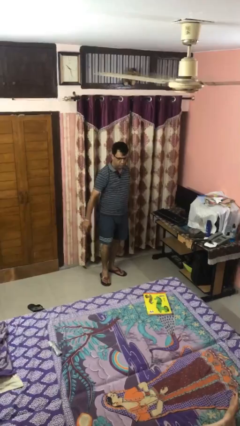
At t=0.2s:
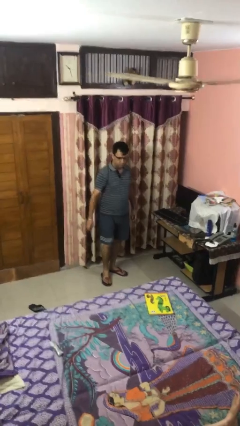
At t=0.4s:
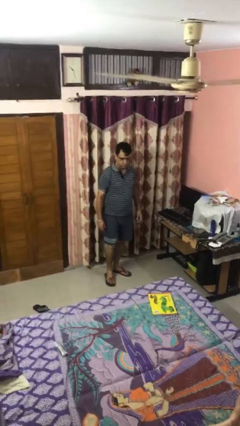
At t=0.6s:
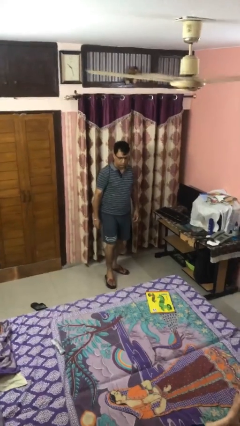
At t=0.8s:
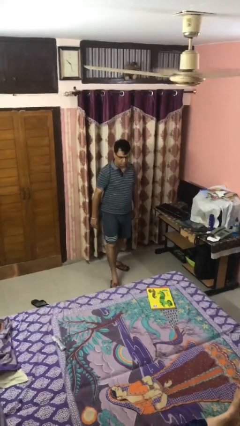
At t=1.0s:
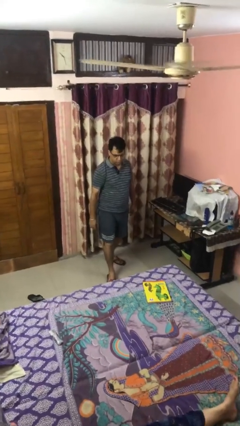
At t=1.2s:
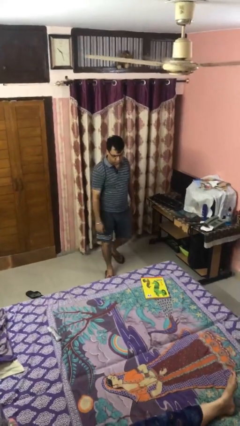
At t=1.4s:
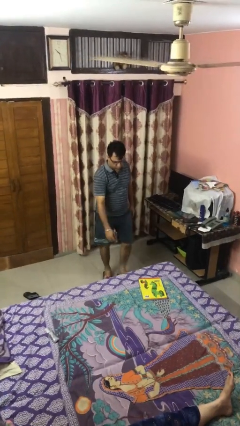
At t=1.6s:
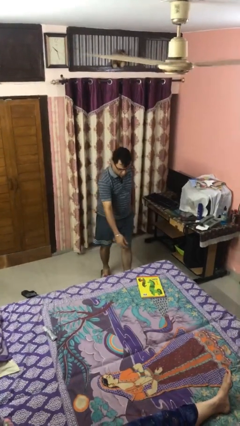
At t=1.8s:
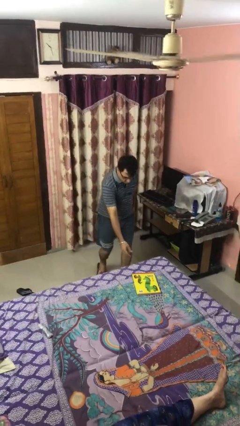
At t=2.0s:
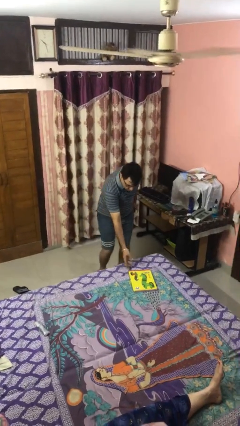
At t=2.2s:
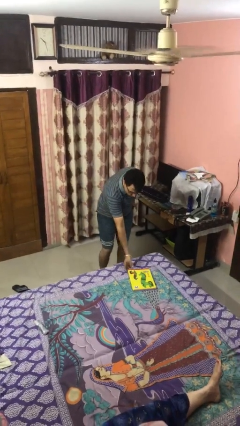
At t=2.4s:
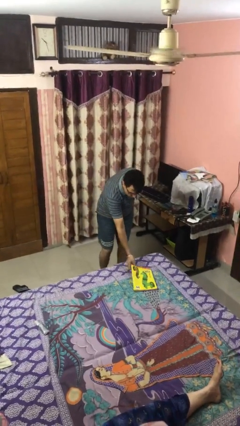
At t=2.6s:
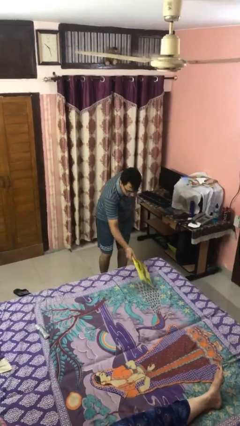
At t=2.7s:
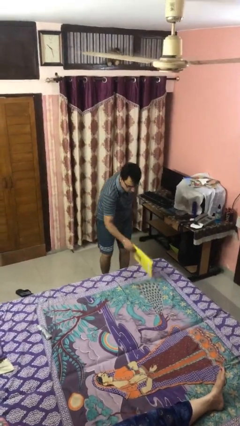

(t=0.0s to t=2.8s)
person picks up object from bed

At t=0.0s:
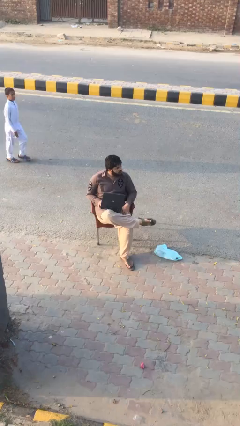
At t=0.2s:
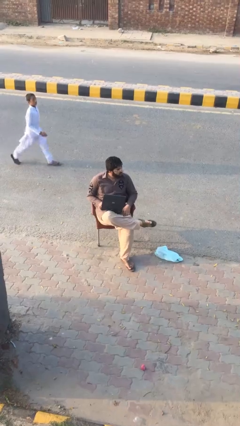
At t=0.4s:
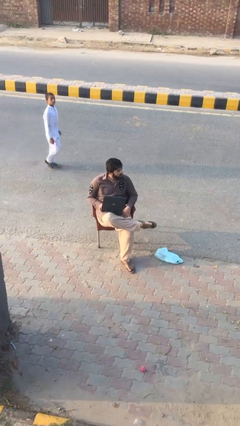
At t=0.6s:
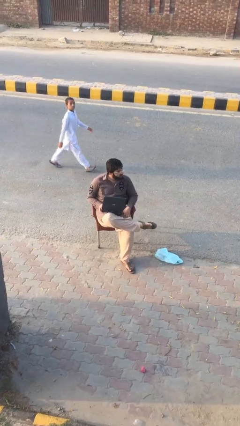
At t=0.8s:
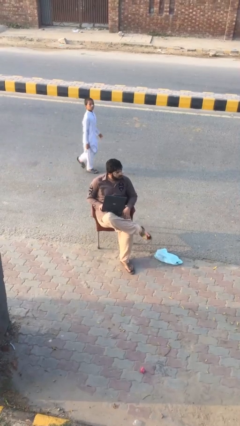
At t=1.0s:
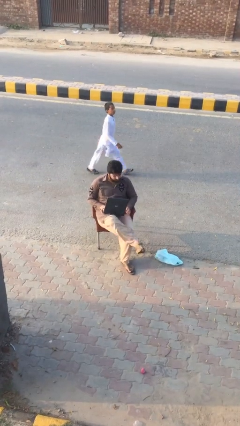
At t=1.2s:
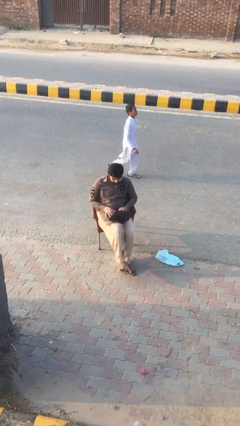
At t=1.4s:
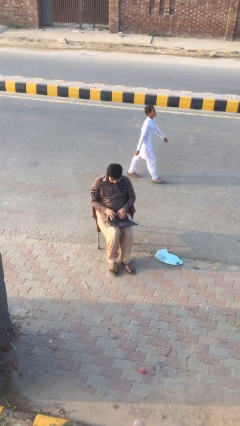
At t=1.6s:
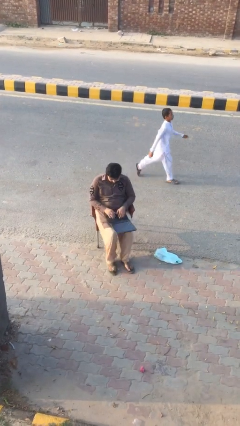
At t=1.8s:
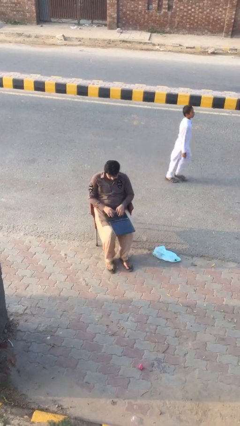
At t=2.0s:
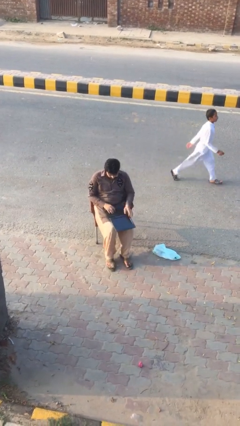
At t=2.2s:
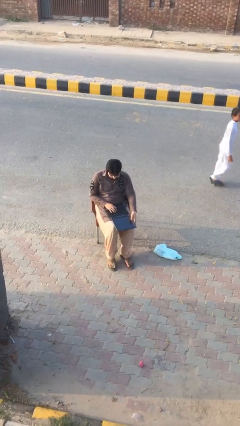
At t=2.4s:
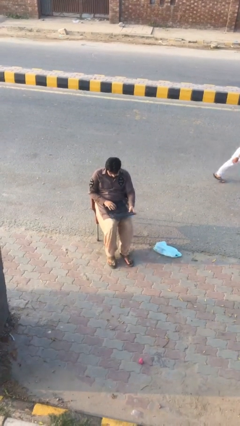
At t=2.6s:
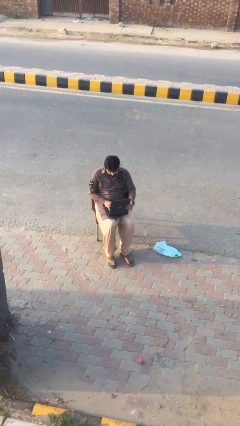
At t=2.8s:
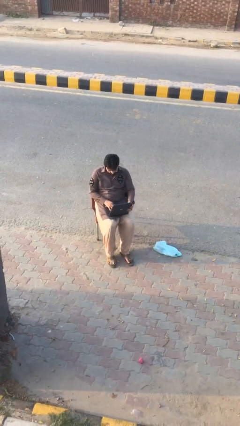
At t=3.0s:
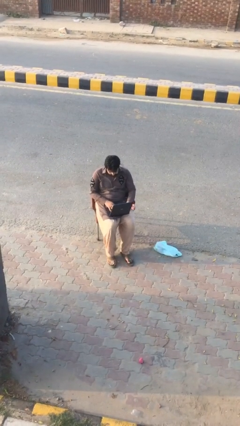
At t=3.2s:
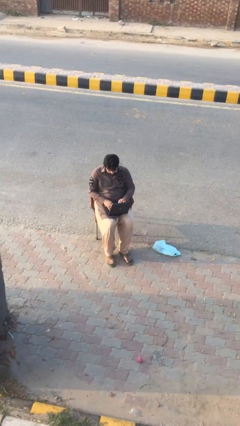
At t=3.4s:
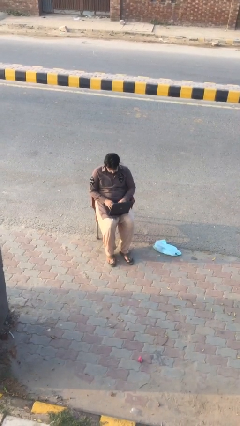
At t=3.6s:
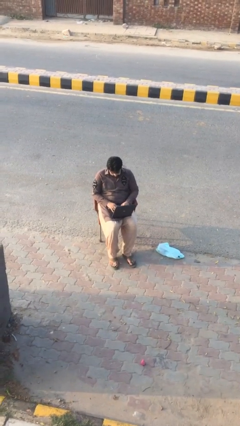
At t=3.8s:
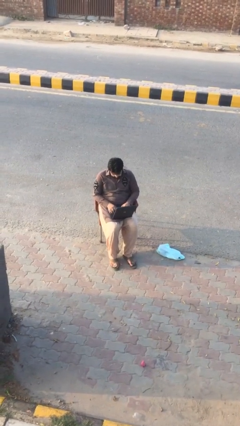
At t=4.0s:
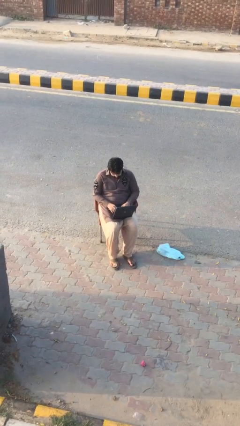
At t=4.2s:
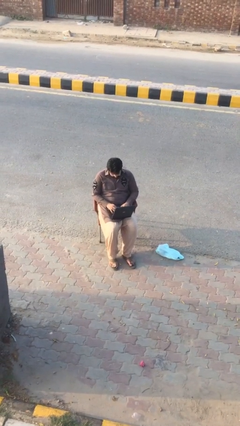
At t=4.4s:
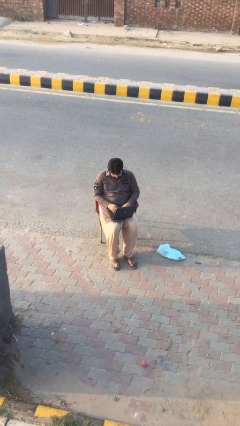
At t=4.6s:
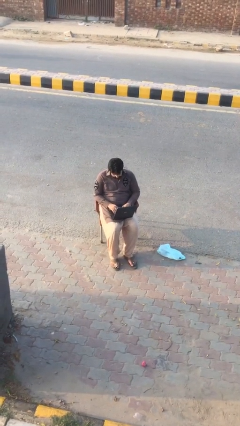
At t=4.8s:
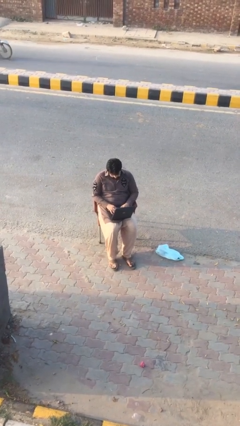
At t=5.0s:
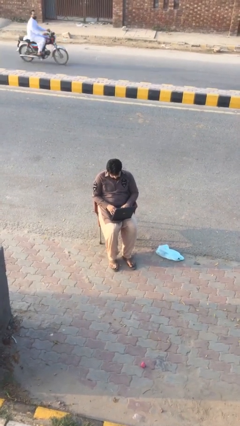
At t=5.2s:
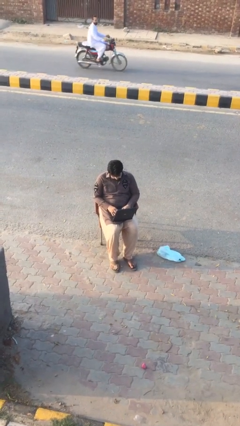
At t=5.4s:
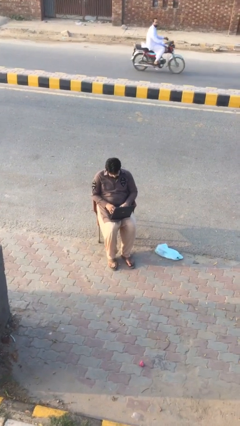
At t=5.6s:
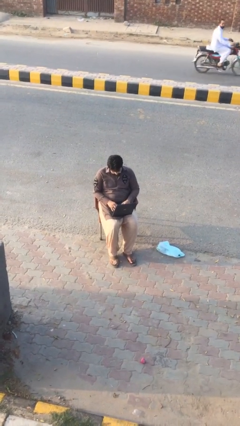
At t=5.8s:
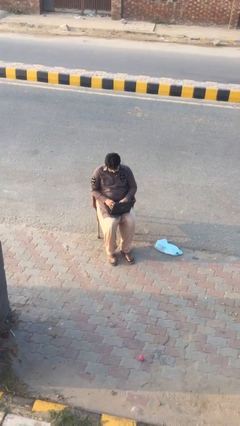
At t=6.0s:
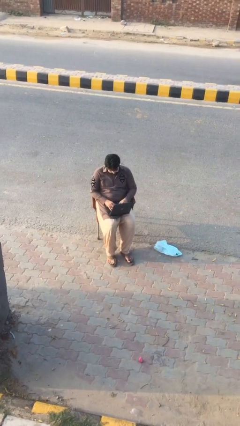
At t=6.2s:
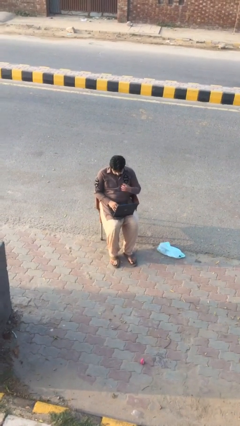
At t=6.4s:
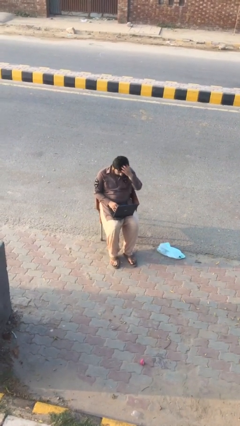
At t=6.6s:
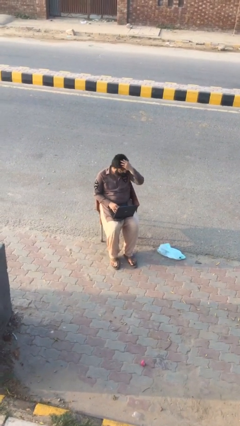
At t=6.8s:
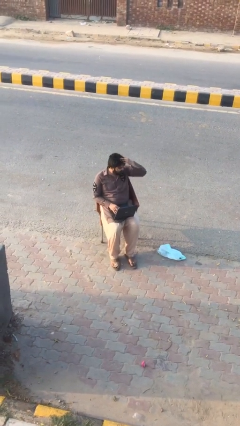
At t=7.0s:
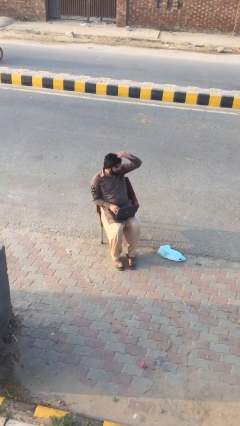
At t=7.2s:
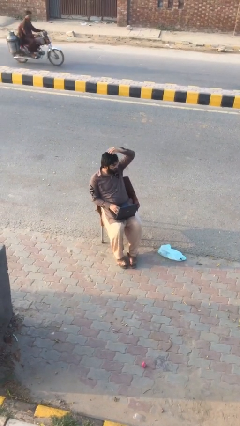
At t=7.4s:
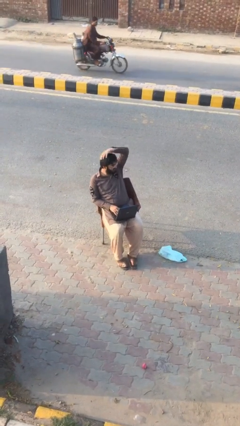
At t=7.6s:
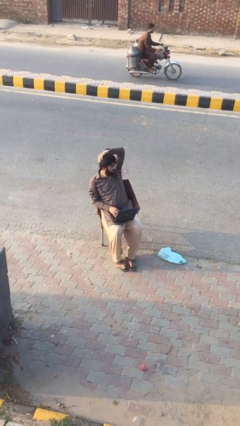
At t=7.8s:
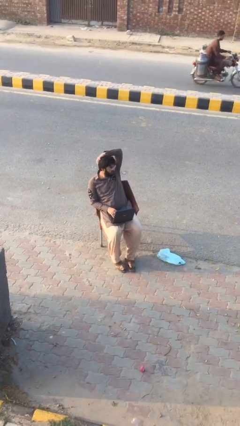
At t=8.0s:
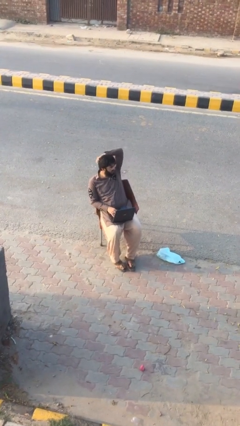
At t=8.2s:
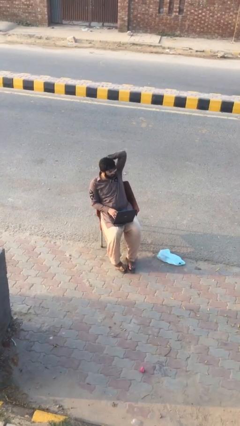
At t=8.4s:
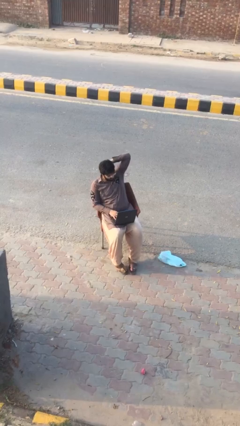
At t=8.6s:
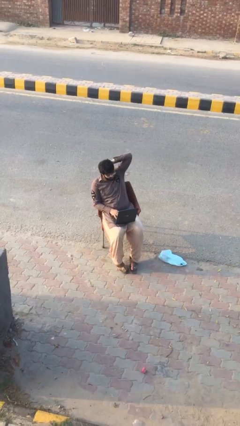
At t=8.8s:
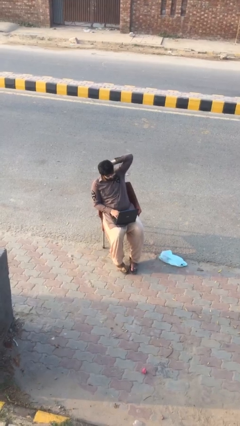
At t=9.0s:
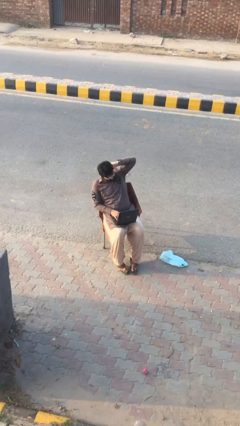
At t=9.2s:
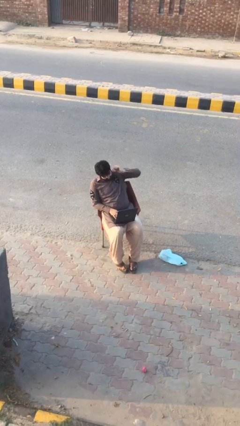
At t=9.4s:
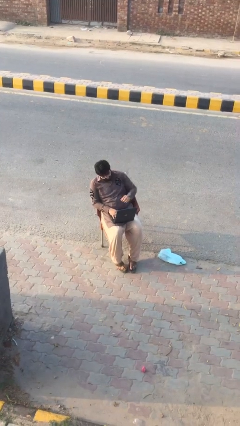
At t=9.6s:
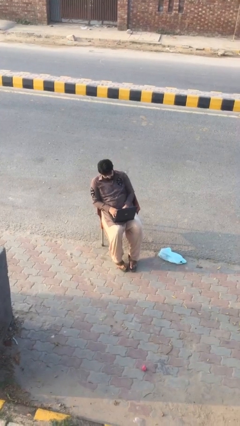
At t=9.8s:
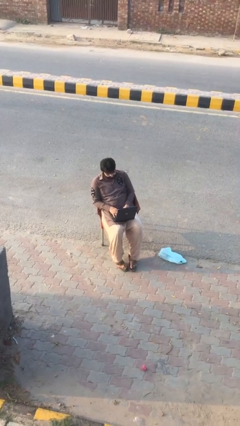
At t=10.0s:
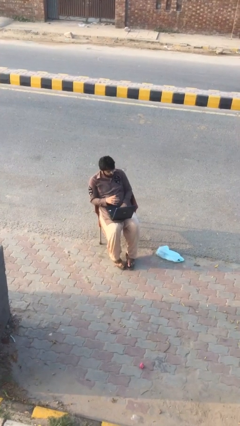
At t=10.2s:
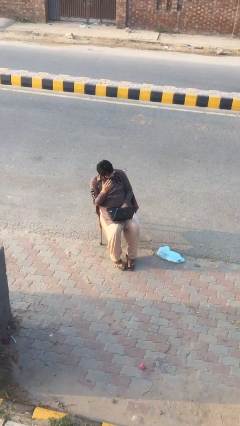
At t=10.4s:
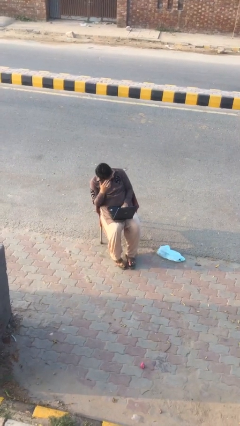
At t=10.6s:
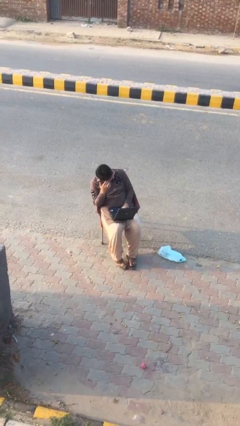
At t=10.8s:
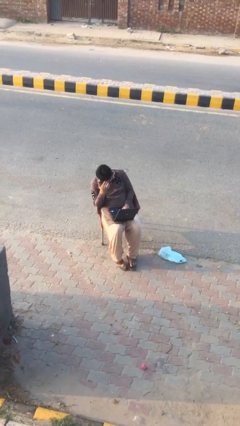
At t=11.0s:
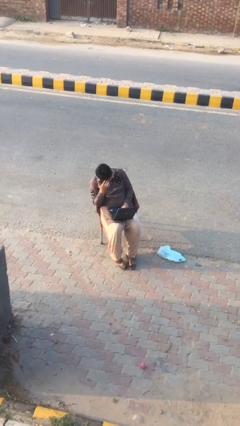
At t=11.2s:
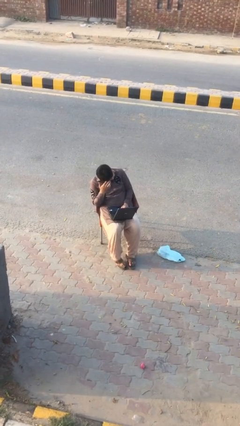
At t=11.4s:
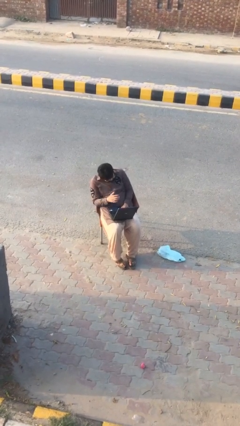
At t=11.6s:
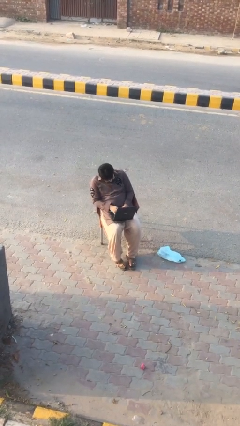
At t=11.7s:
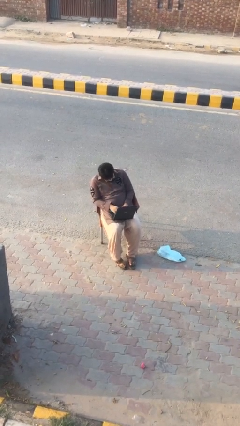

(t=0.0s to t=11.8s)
person interacts with laptop

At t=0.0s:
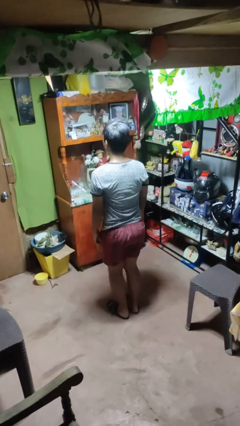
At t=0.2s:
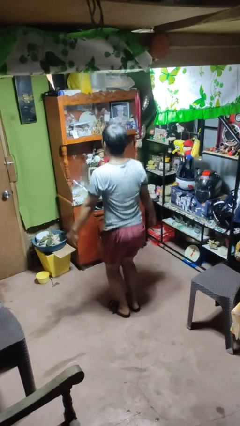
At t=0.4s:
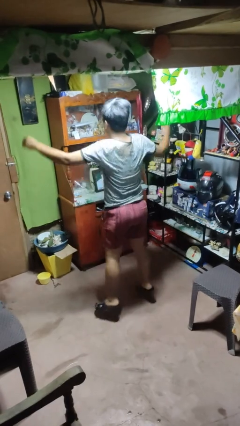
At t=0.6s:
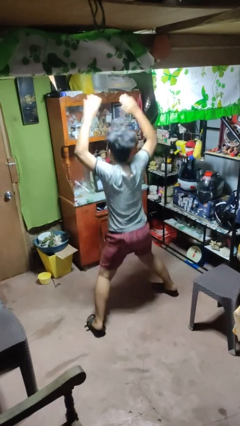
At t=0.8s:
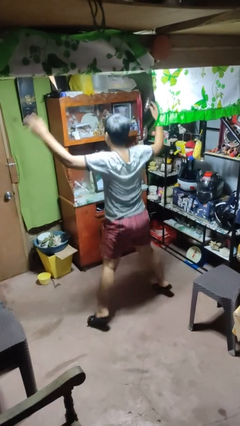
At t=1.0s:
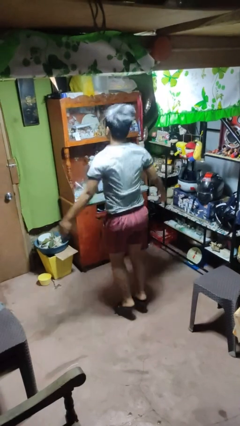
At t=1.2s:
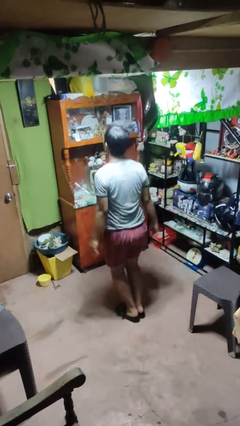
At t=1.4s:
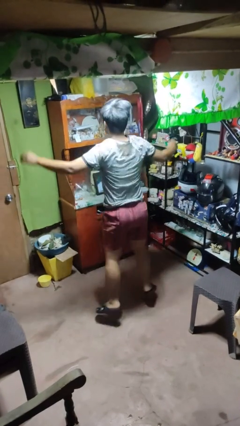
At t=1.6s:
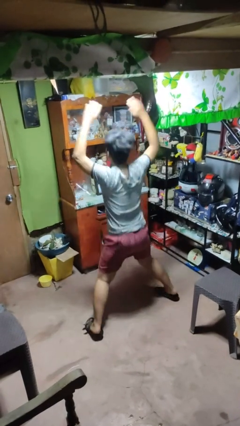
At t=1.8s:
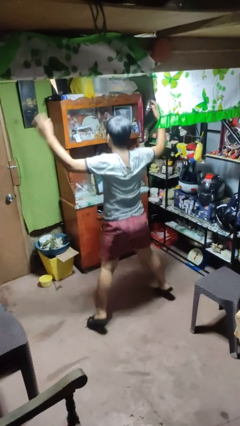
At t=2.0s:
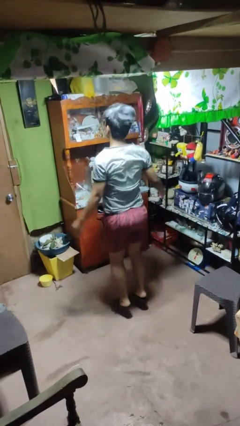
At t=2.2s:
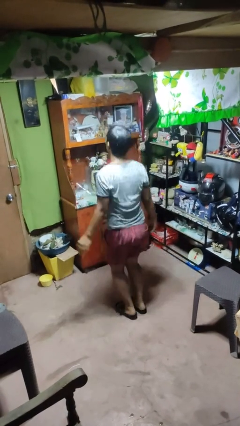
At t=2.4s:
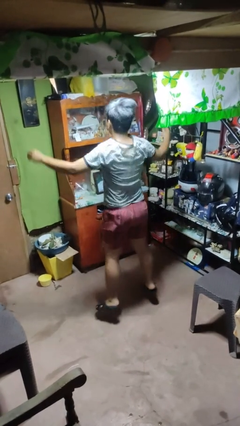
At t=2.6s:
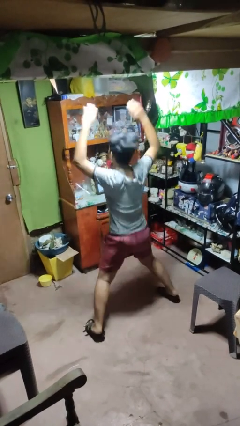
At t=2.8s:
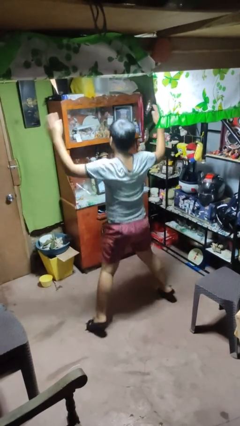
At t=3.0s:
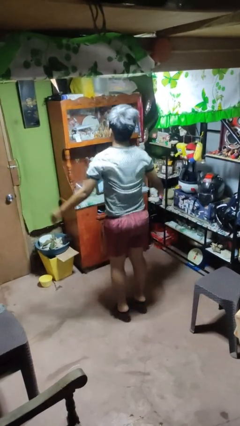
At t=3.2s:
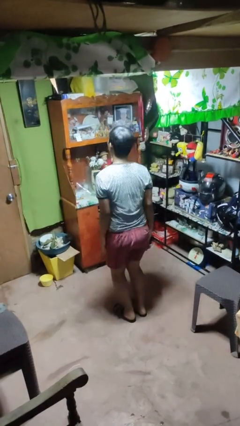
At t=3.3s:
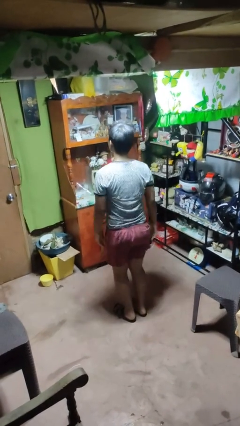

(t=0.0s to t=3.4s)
person exercises with jumping jacks
